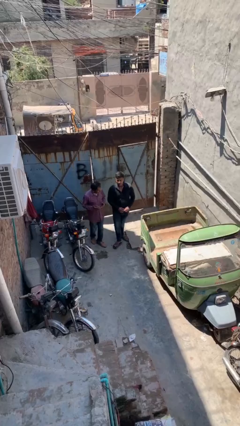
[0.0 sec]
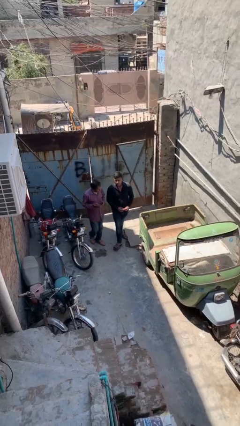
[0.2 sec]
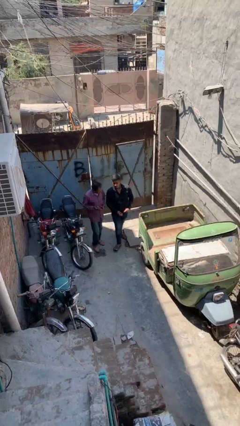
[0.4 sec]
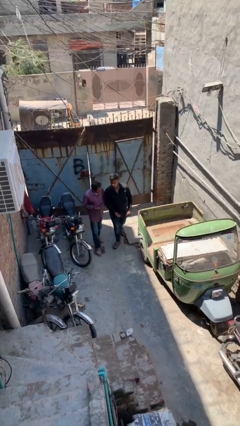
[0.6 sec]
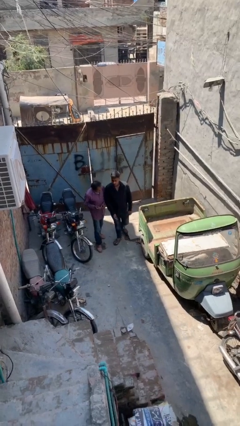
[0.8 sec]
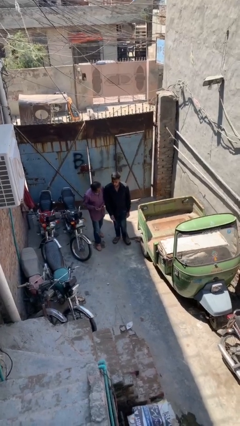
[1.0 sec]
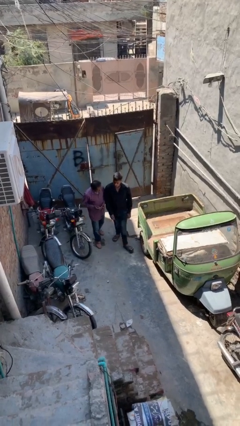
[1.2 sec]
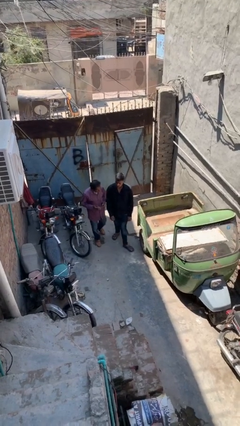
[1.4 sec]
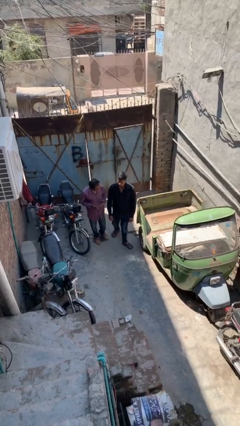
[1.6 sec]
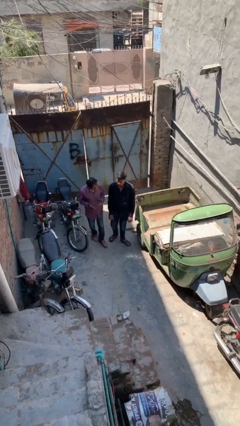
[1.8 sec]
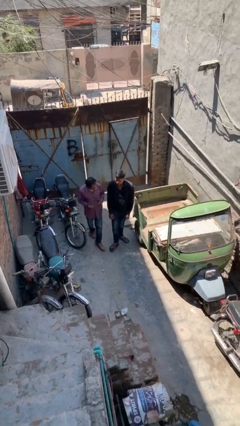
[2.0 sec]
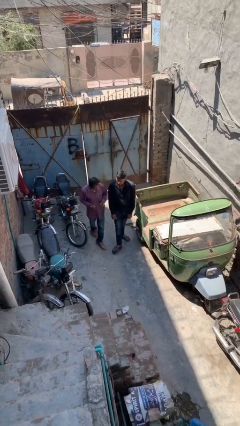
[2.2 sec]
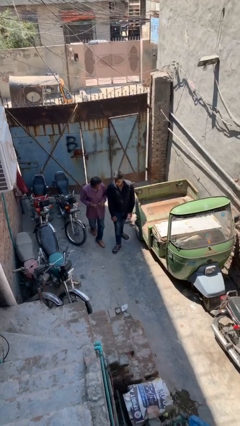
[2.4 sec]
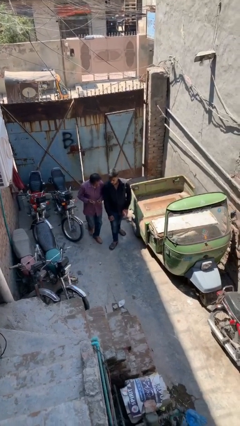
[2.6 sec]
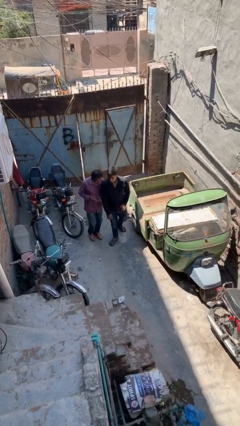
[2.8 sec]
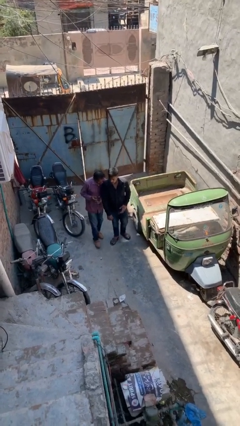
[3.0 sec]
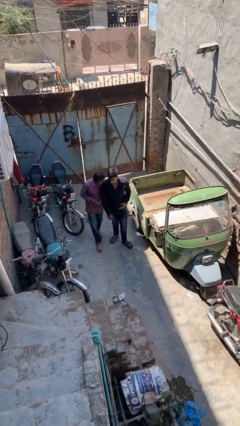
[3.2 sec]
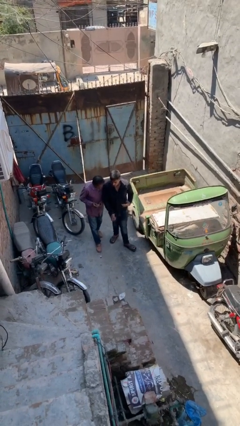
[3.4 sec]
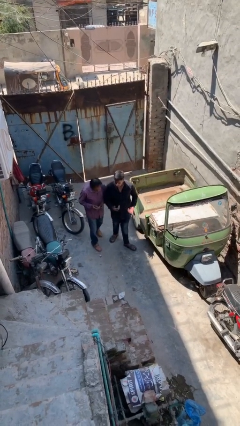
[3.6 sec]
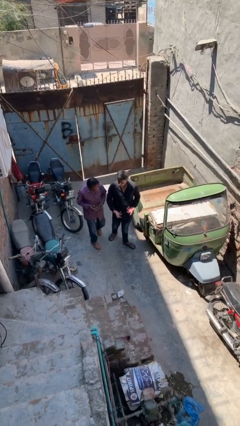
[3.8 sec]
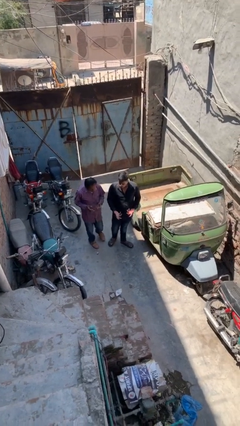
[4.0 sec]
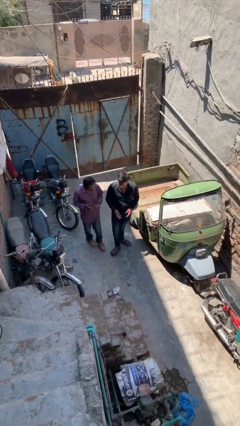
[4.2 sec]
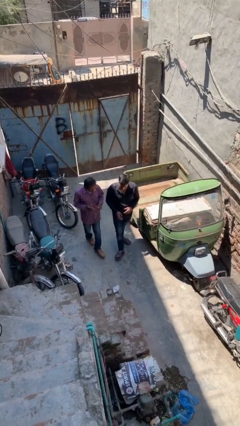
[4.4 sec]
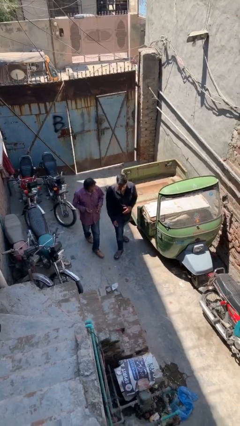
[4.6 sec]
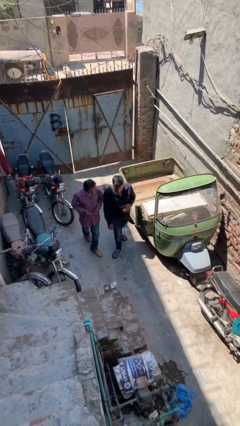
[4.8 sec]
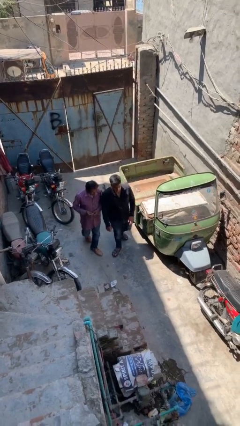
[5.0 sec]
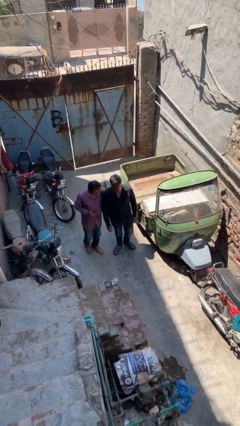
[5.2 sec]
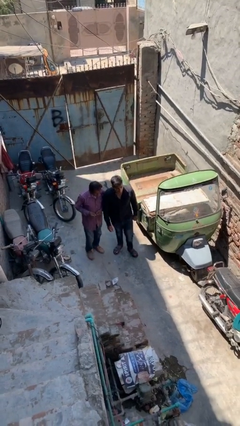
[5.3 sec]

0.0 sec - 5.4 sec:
person talks to person

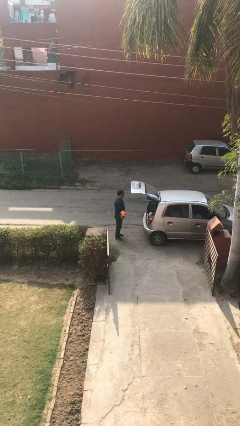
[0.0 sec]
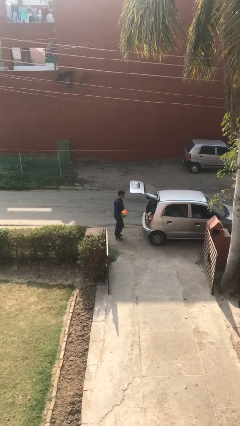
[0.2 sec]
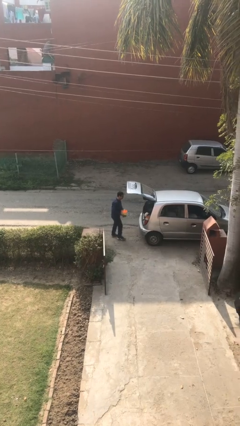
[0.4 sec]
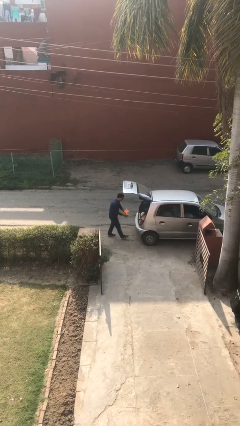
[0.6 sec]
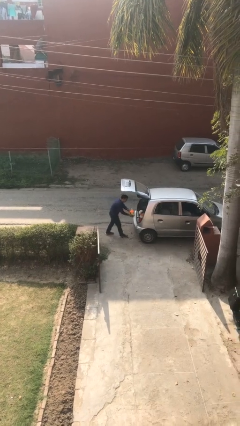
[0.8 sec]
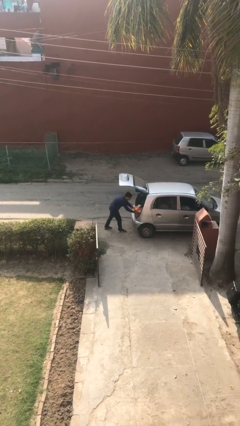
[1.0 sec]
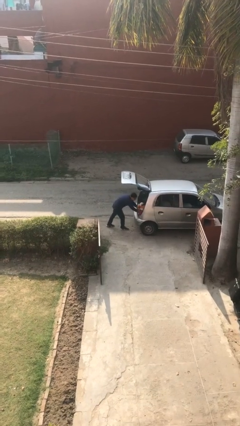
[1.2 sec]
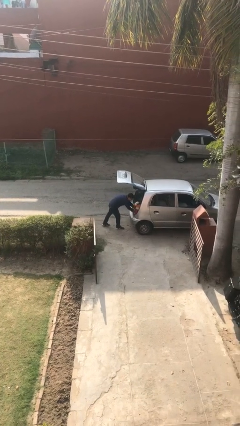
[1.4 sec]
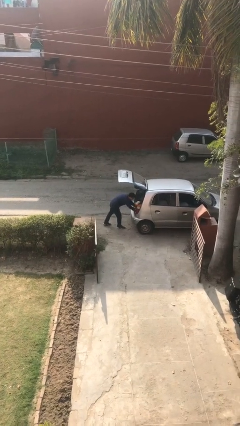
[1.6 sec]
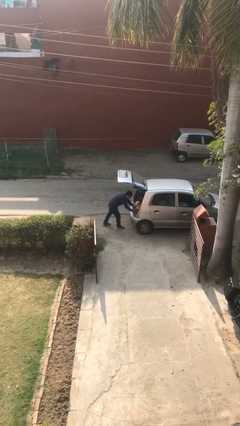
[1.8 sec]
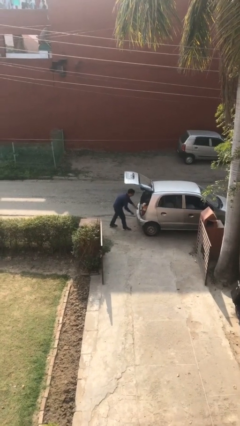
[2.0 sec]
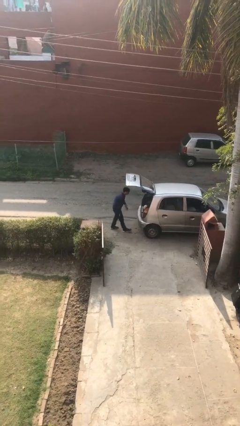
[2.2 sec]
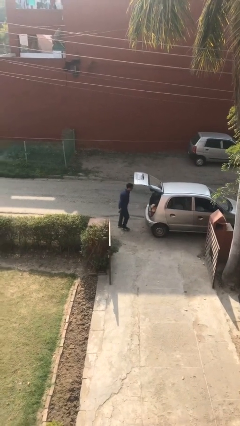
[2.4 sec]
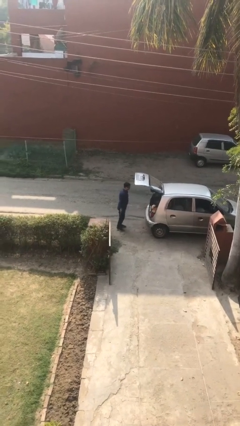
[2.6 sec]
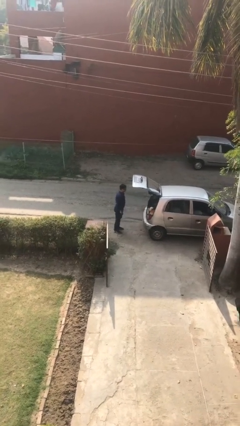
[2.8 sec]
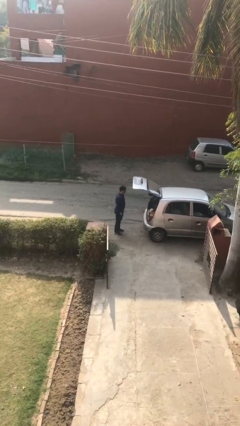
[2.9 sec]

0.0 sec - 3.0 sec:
person loads car

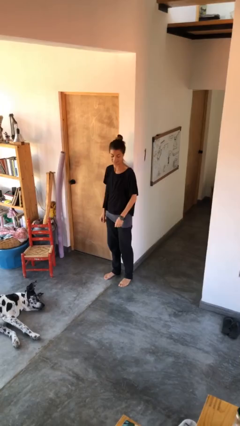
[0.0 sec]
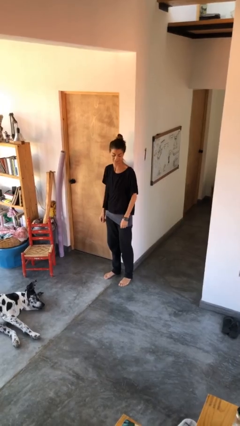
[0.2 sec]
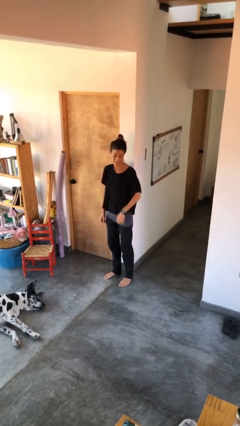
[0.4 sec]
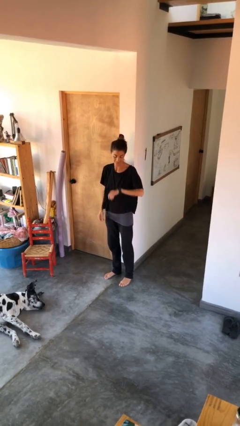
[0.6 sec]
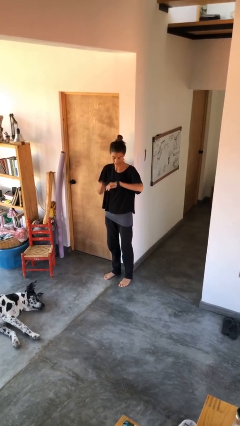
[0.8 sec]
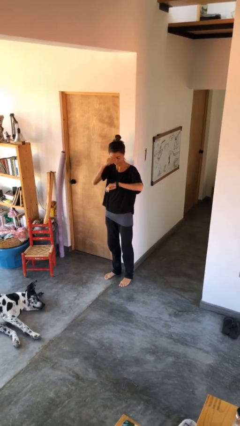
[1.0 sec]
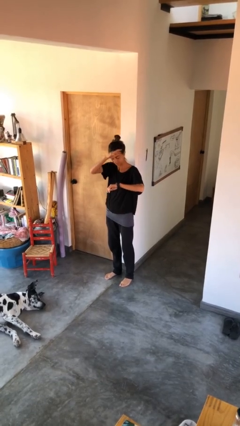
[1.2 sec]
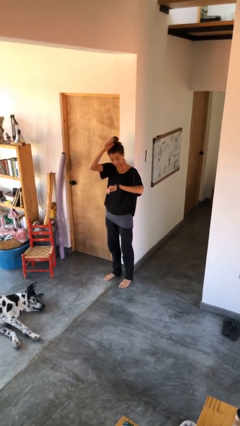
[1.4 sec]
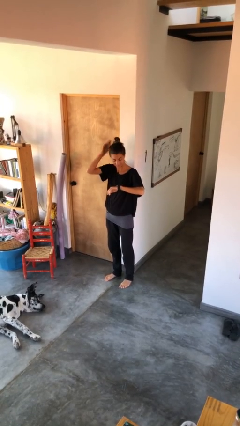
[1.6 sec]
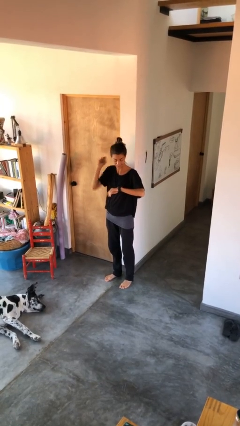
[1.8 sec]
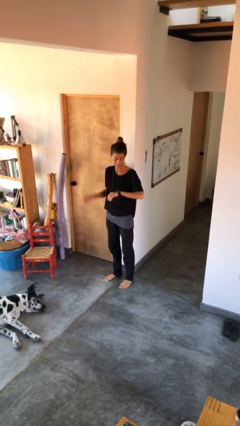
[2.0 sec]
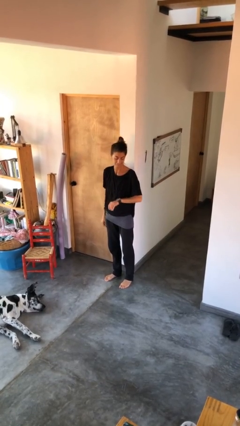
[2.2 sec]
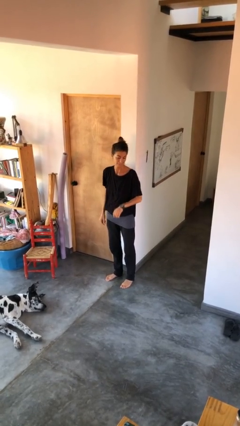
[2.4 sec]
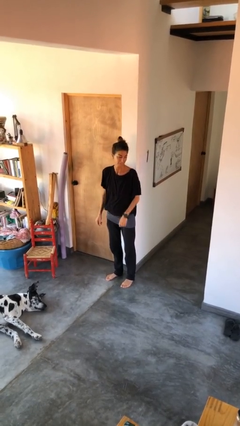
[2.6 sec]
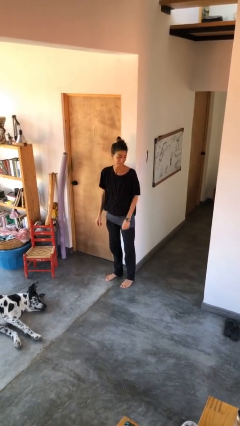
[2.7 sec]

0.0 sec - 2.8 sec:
person looks at wristwatch

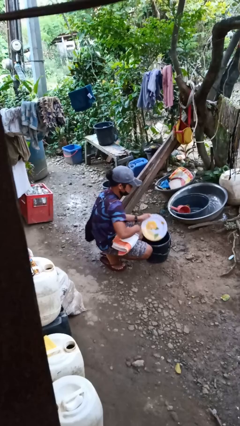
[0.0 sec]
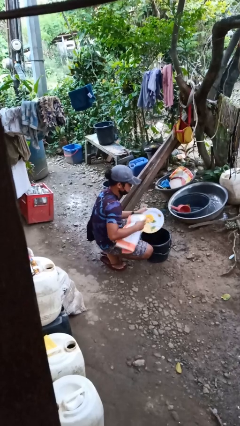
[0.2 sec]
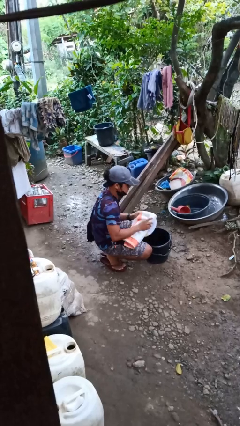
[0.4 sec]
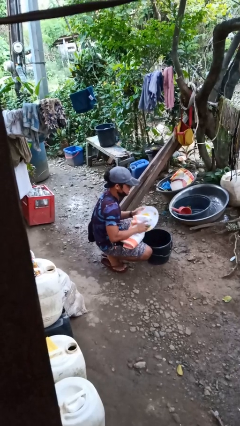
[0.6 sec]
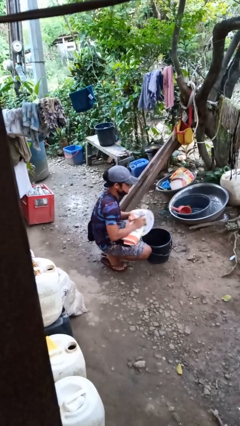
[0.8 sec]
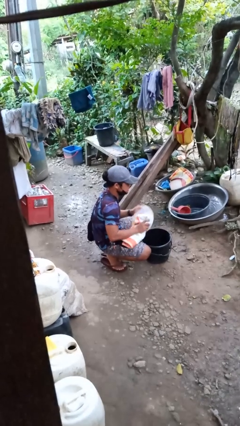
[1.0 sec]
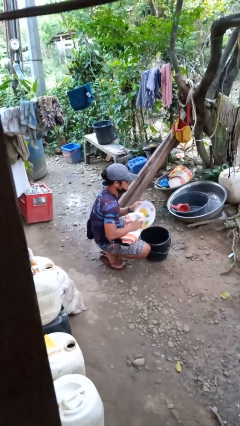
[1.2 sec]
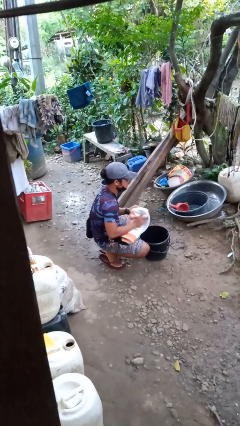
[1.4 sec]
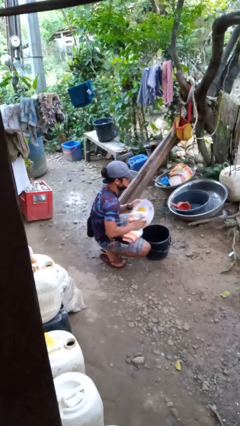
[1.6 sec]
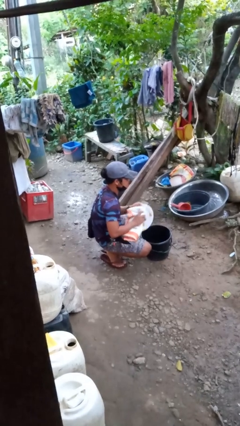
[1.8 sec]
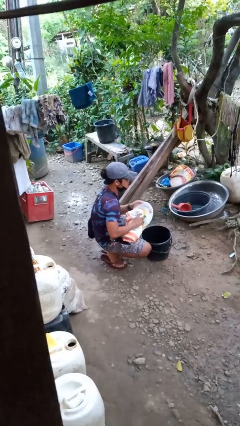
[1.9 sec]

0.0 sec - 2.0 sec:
person dries dish

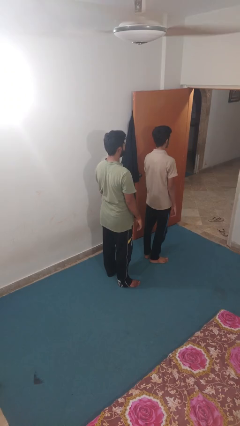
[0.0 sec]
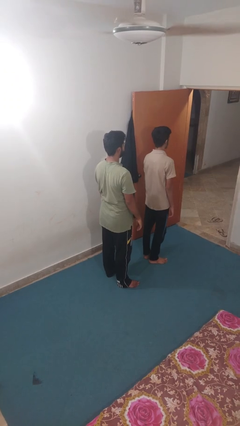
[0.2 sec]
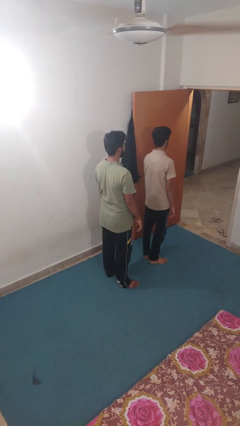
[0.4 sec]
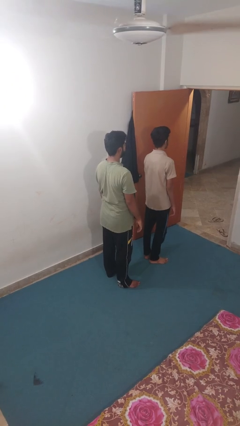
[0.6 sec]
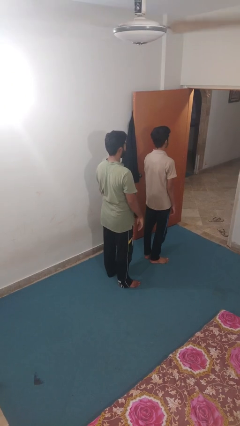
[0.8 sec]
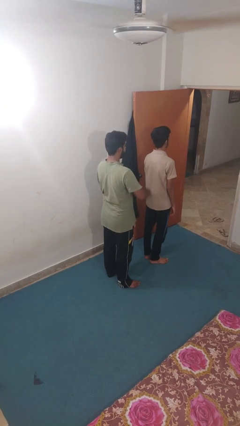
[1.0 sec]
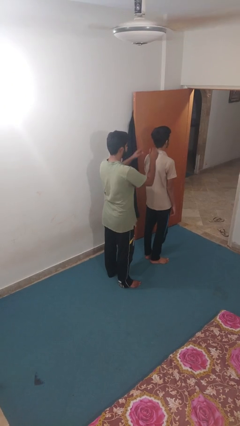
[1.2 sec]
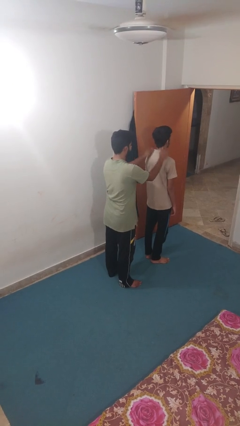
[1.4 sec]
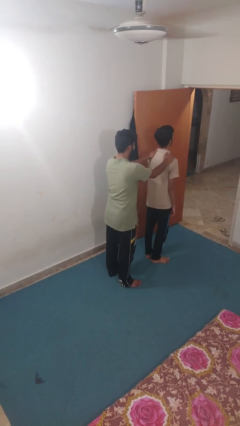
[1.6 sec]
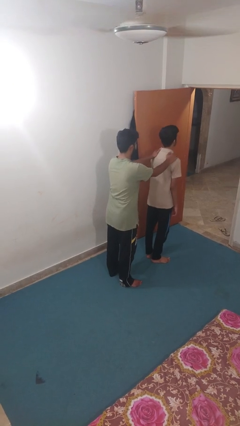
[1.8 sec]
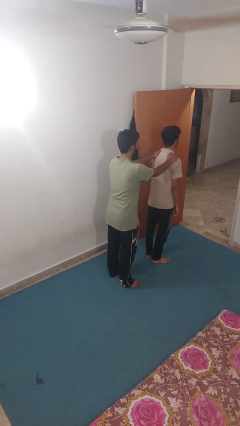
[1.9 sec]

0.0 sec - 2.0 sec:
person grabs person by shoulder

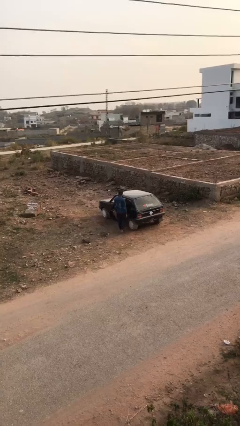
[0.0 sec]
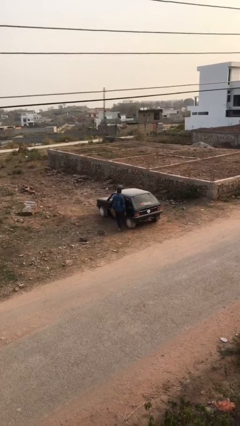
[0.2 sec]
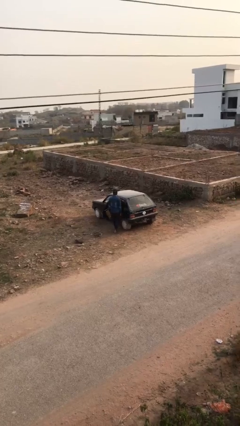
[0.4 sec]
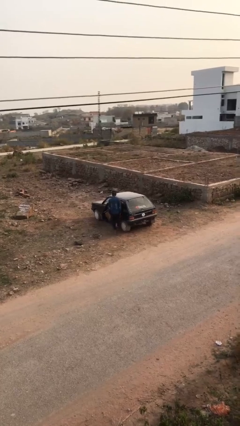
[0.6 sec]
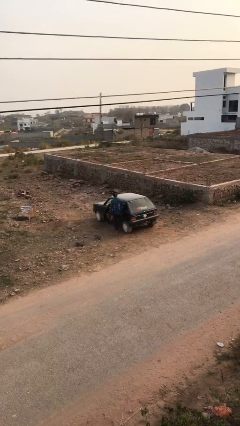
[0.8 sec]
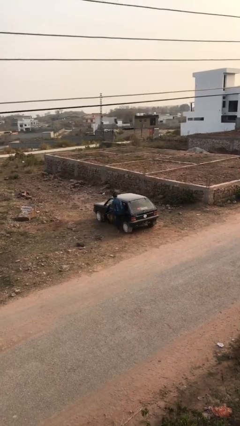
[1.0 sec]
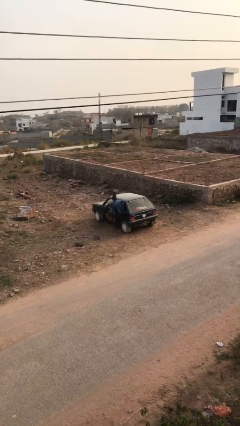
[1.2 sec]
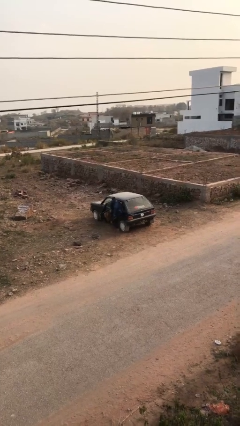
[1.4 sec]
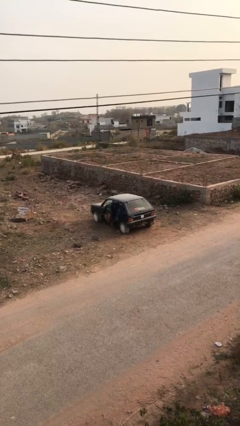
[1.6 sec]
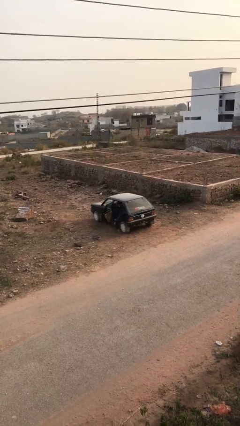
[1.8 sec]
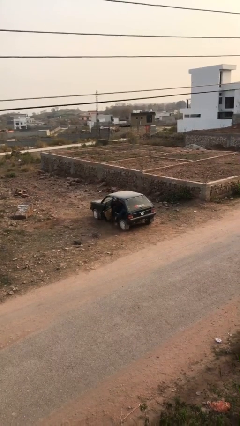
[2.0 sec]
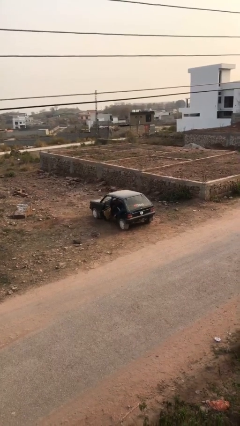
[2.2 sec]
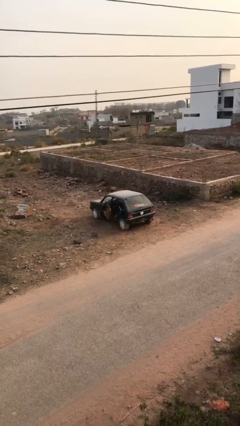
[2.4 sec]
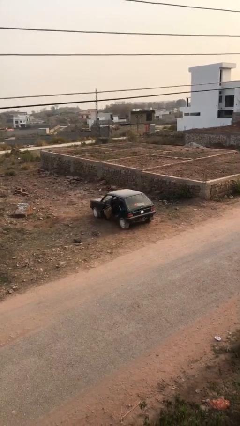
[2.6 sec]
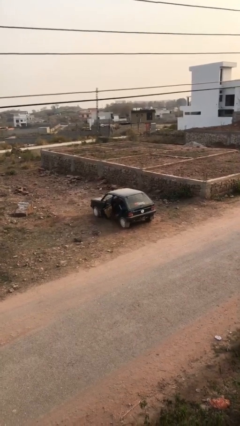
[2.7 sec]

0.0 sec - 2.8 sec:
person enters car
